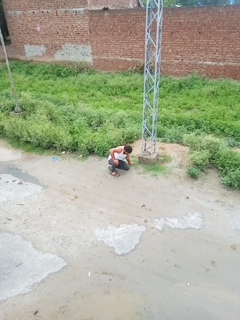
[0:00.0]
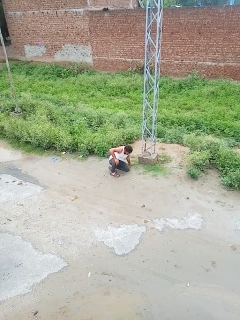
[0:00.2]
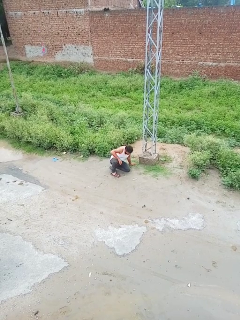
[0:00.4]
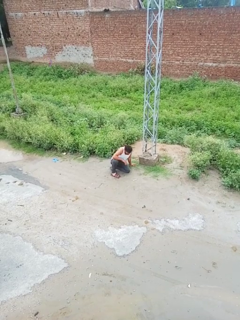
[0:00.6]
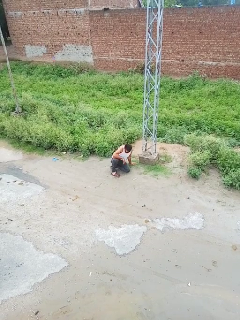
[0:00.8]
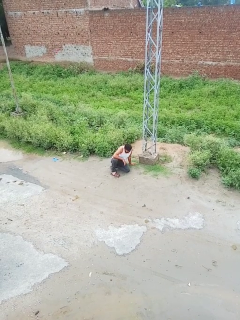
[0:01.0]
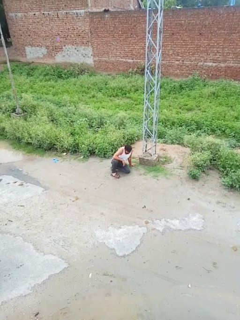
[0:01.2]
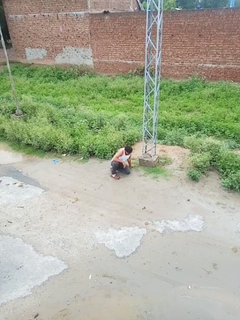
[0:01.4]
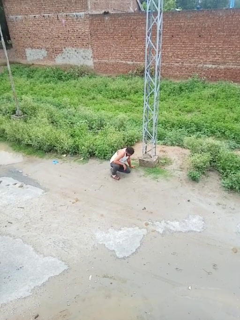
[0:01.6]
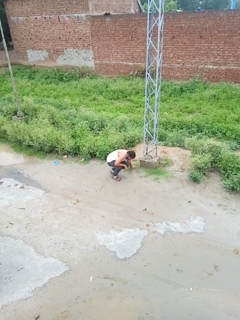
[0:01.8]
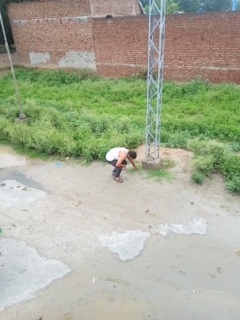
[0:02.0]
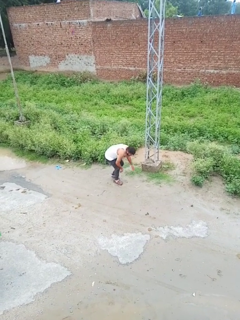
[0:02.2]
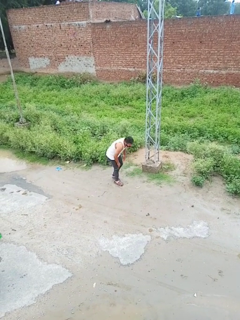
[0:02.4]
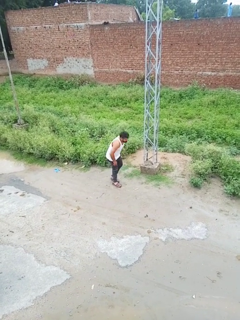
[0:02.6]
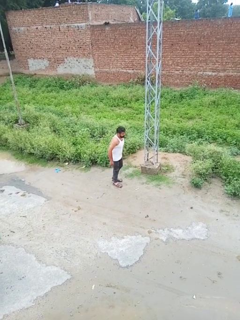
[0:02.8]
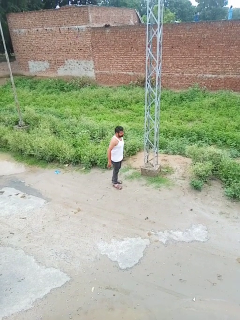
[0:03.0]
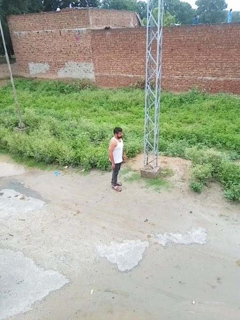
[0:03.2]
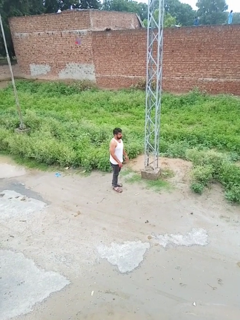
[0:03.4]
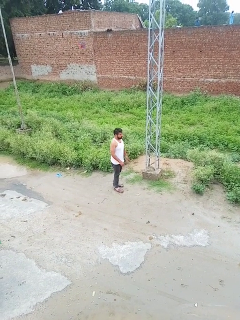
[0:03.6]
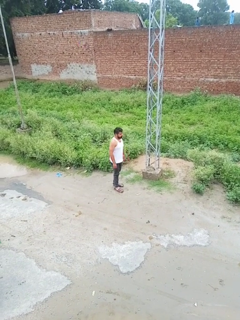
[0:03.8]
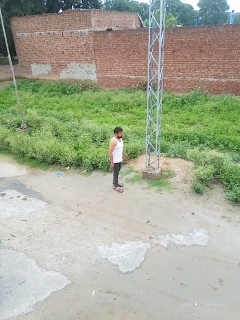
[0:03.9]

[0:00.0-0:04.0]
person stands up from floor

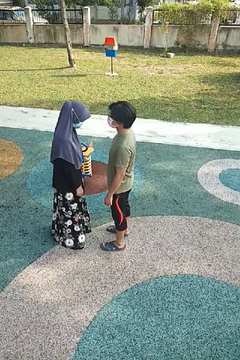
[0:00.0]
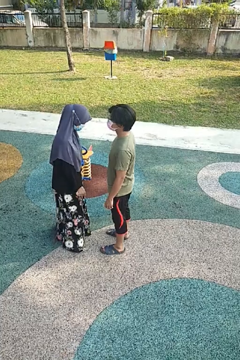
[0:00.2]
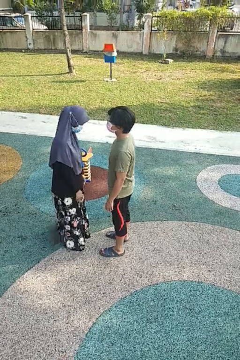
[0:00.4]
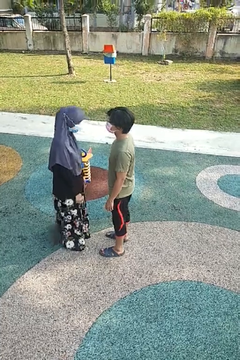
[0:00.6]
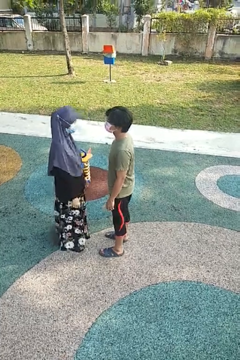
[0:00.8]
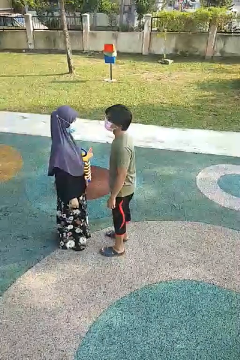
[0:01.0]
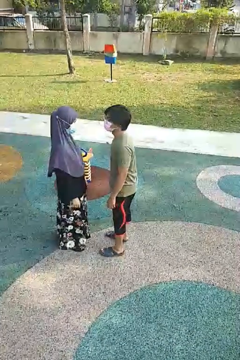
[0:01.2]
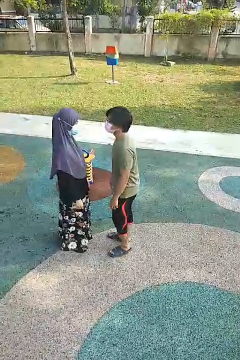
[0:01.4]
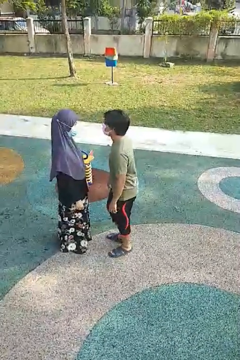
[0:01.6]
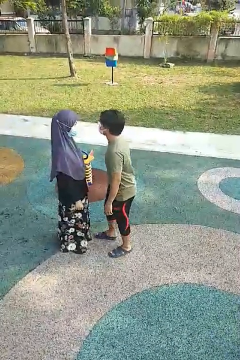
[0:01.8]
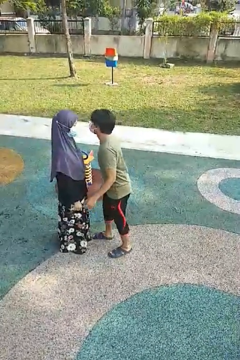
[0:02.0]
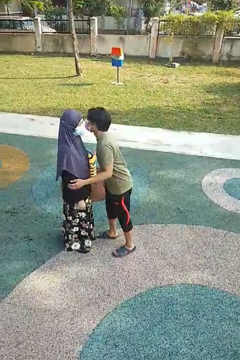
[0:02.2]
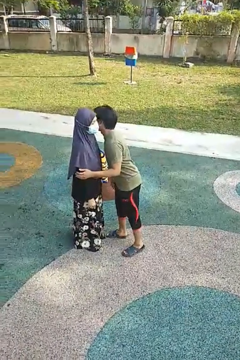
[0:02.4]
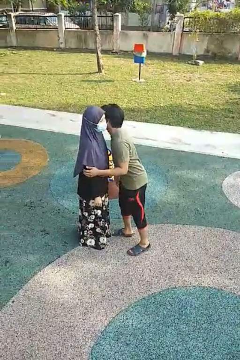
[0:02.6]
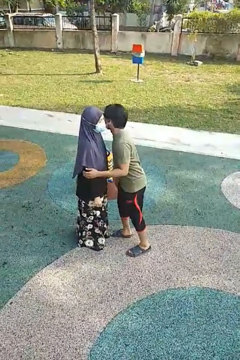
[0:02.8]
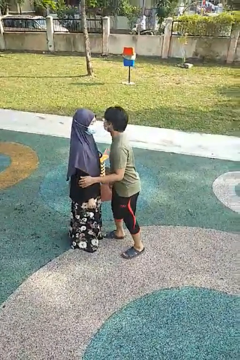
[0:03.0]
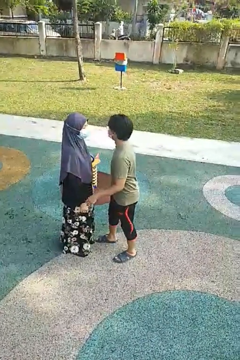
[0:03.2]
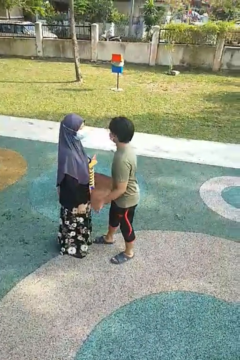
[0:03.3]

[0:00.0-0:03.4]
person kisses cheek of person

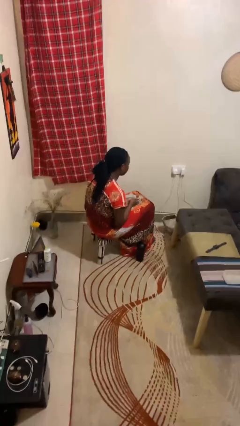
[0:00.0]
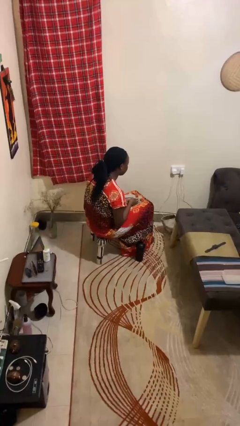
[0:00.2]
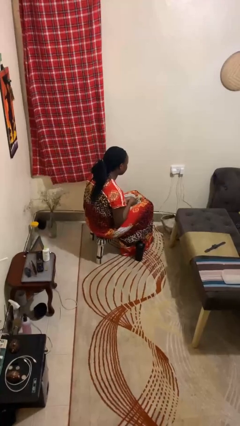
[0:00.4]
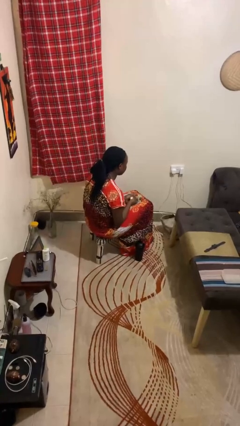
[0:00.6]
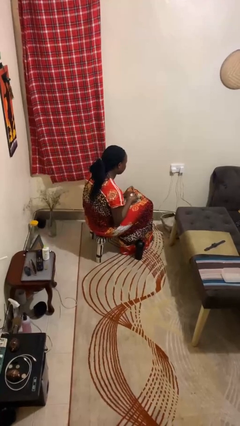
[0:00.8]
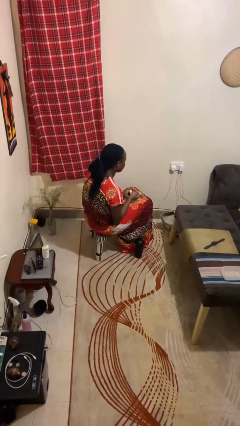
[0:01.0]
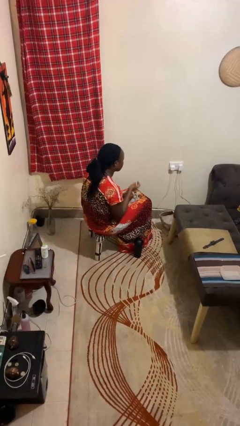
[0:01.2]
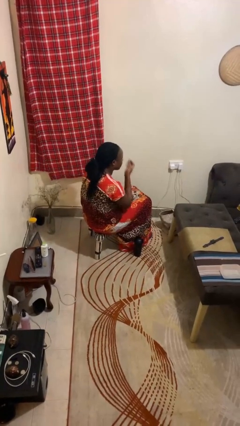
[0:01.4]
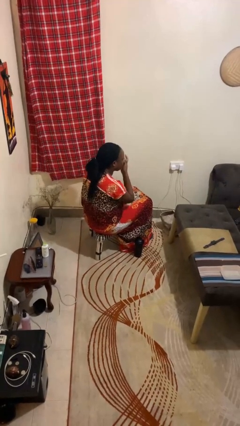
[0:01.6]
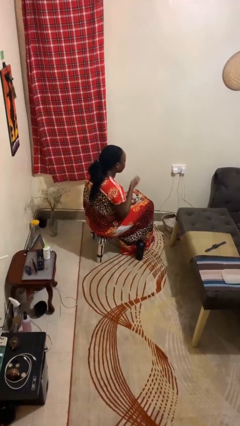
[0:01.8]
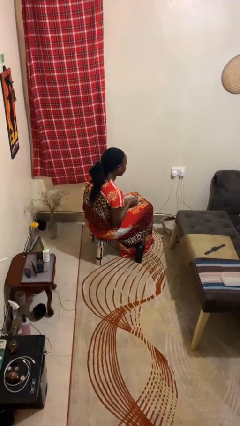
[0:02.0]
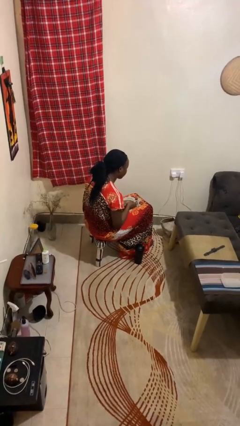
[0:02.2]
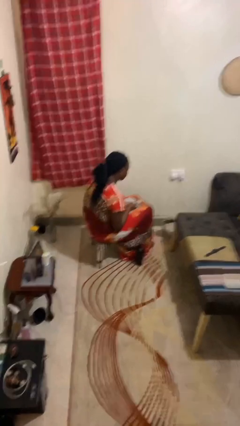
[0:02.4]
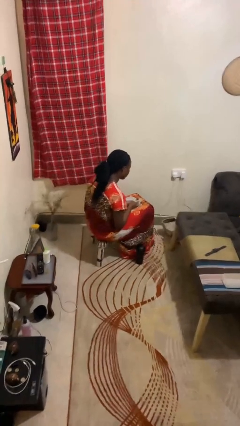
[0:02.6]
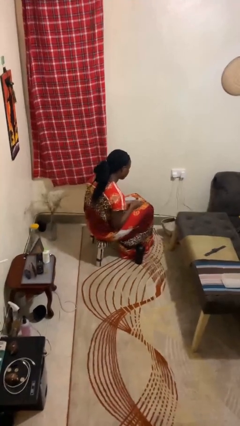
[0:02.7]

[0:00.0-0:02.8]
person takes medicine pills

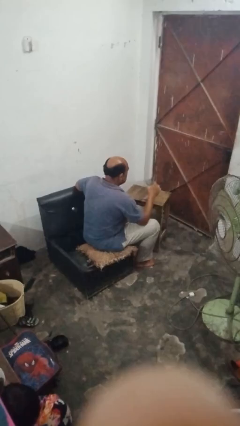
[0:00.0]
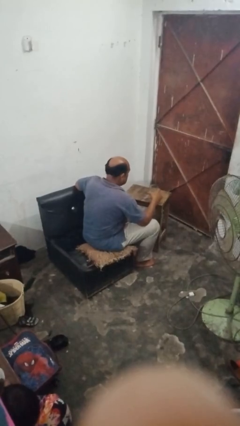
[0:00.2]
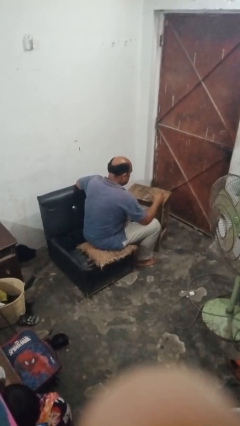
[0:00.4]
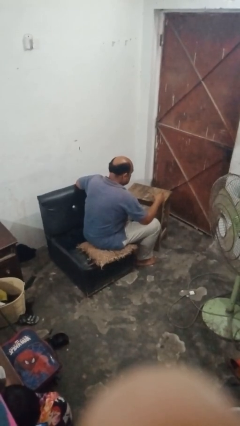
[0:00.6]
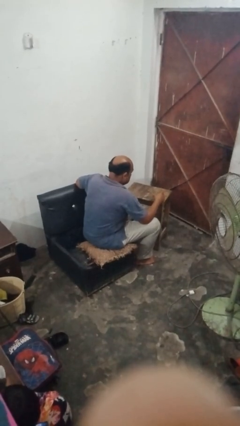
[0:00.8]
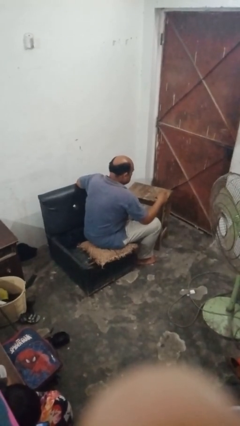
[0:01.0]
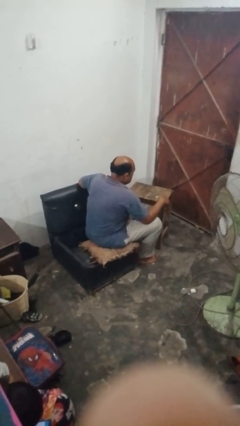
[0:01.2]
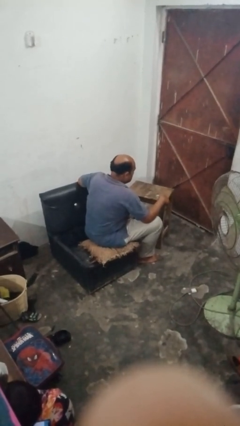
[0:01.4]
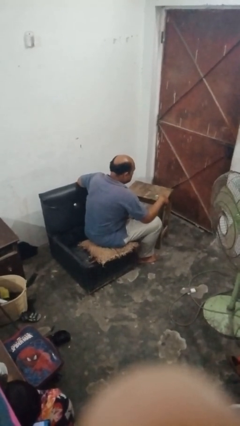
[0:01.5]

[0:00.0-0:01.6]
person puts down object on table

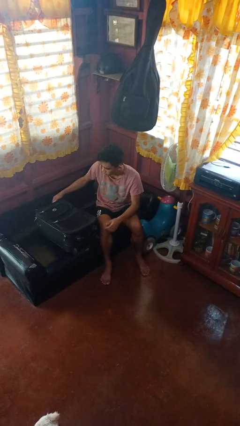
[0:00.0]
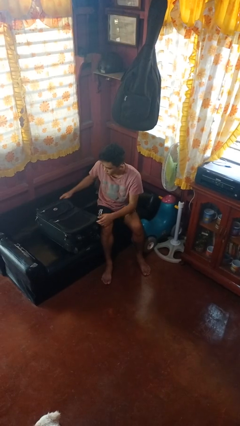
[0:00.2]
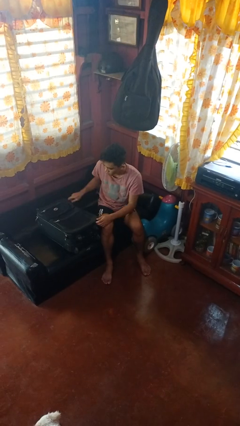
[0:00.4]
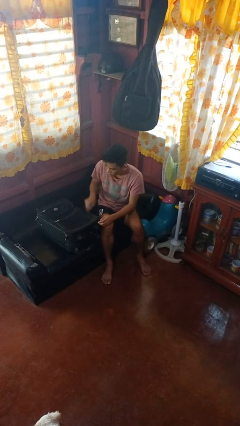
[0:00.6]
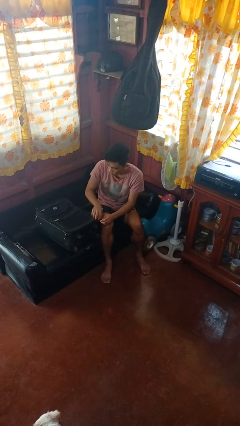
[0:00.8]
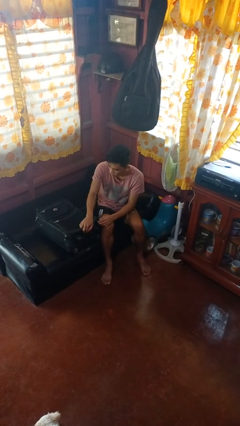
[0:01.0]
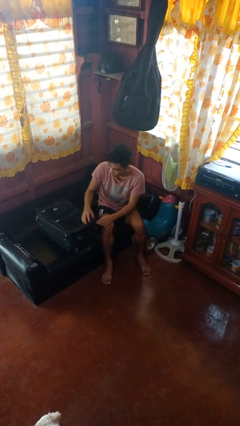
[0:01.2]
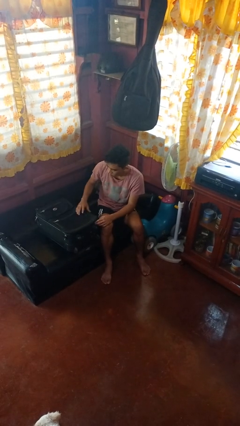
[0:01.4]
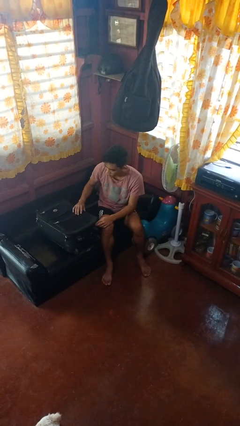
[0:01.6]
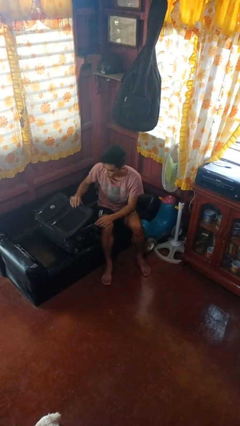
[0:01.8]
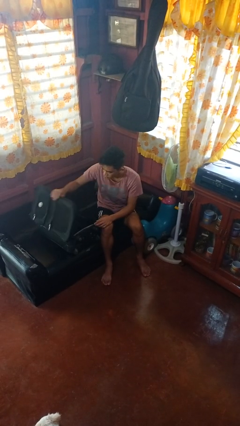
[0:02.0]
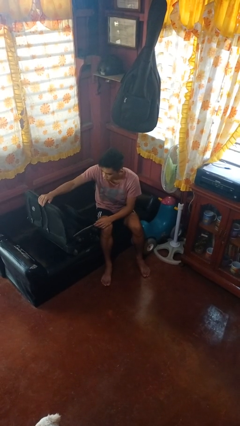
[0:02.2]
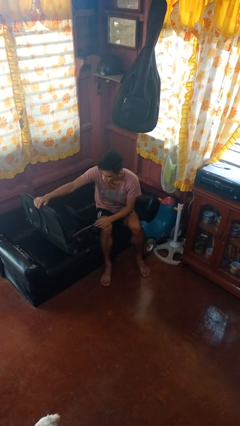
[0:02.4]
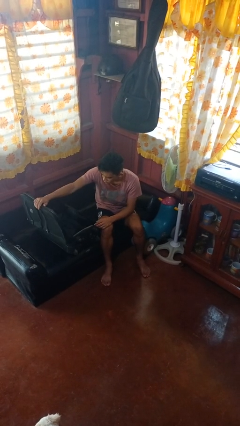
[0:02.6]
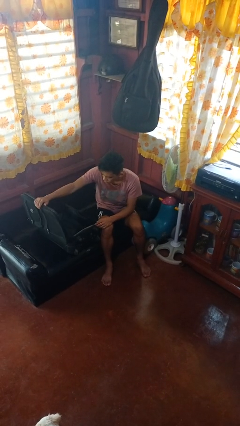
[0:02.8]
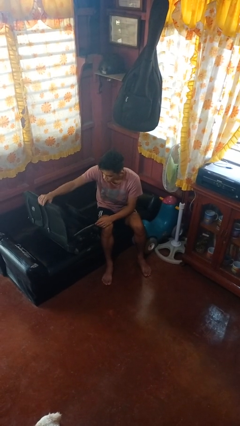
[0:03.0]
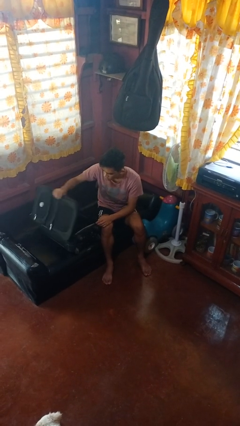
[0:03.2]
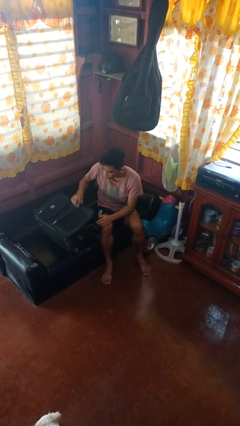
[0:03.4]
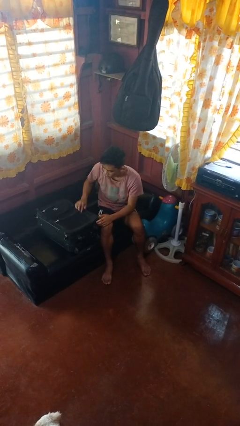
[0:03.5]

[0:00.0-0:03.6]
person opens suitcase

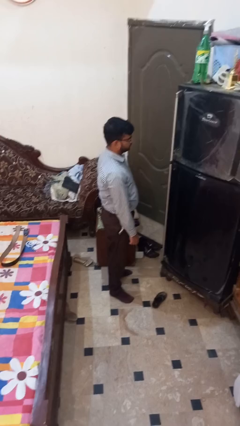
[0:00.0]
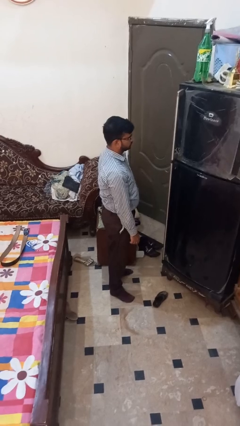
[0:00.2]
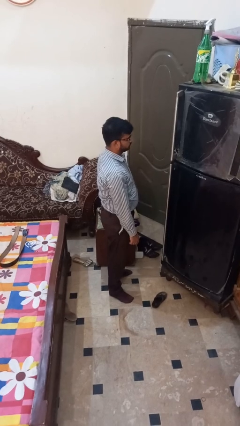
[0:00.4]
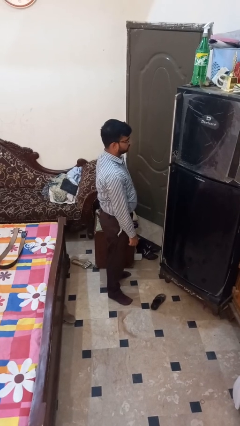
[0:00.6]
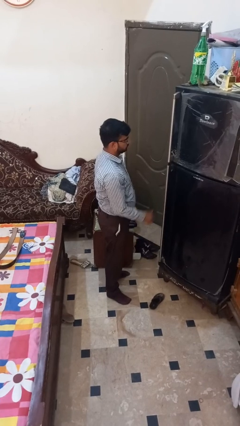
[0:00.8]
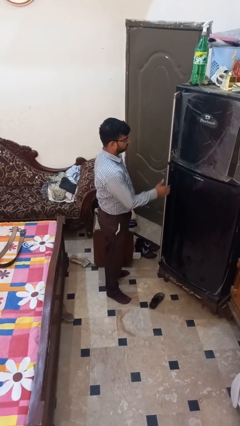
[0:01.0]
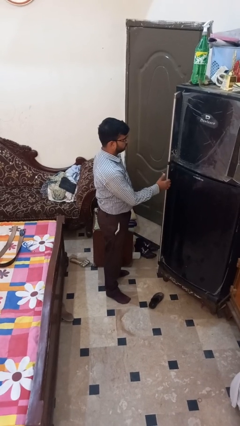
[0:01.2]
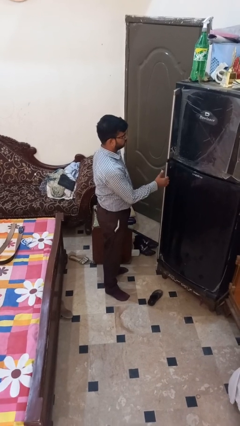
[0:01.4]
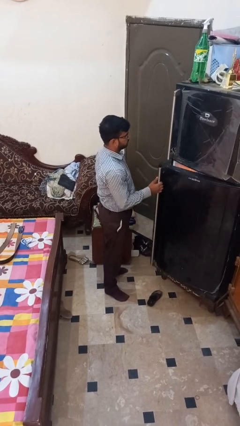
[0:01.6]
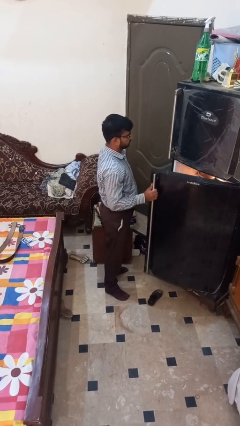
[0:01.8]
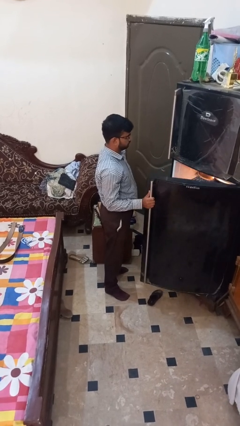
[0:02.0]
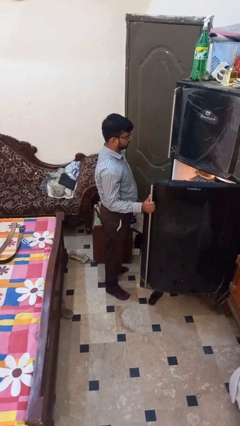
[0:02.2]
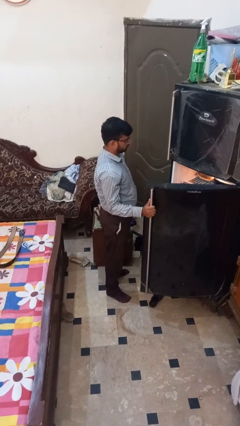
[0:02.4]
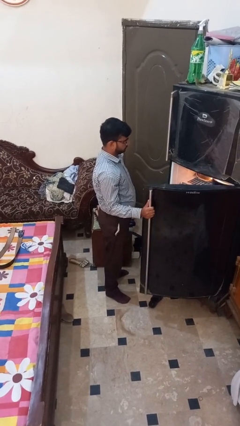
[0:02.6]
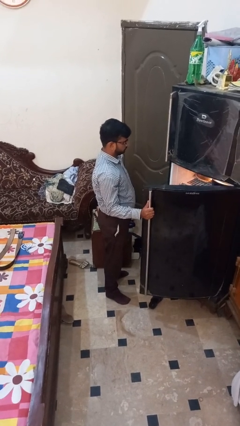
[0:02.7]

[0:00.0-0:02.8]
person opens refrigerator

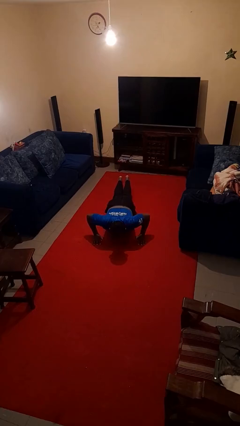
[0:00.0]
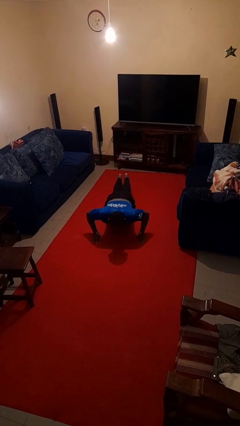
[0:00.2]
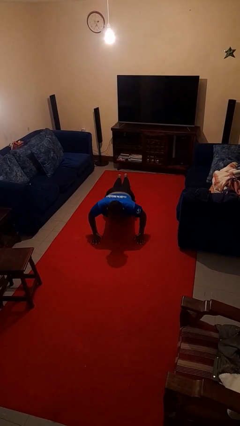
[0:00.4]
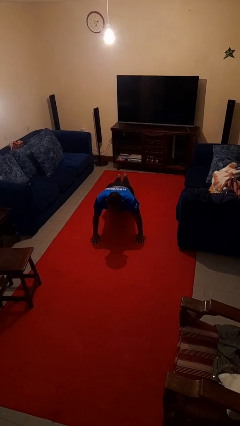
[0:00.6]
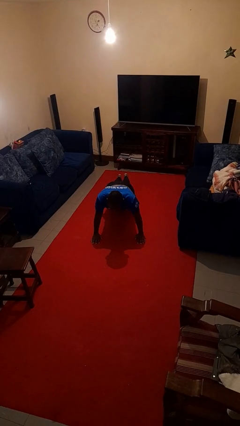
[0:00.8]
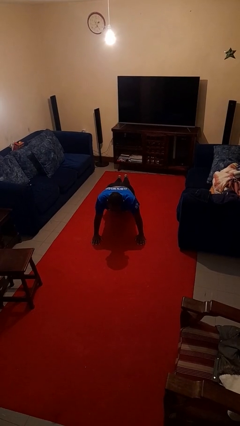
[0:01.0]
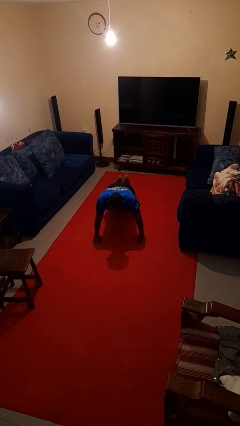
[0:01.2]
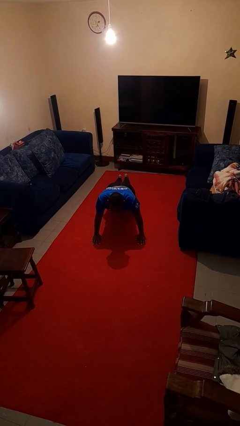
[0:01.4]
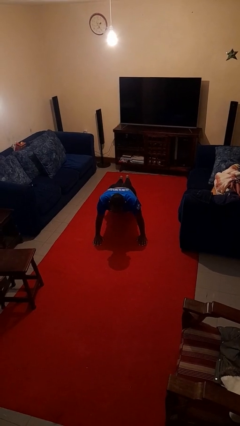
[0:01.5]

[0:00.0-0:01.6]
person exercises with pushup
